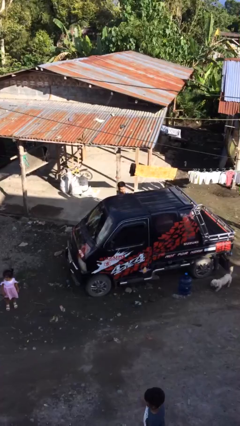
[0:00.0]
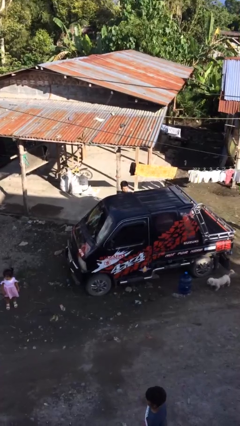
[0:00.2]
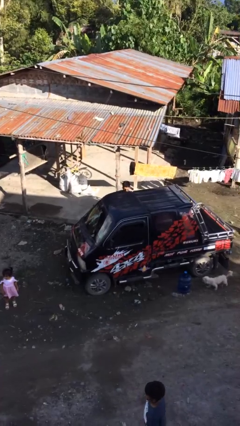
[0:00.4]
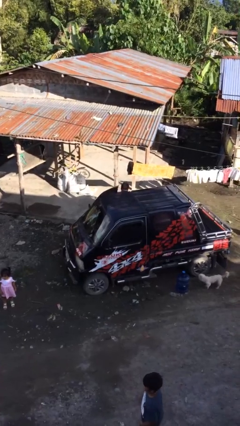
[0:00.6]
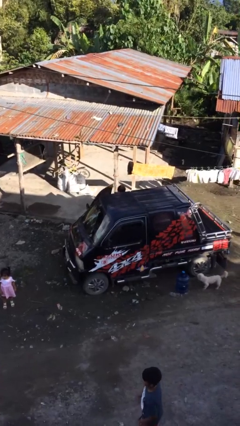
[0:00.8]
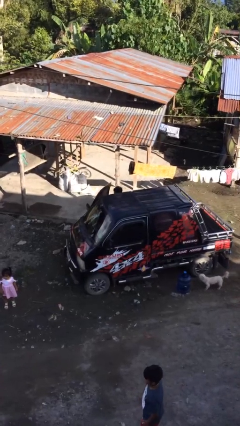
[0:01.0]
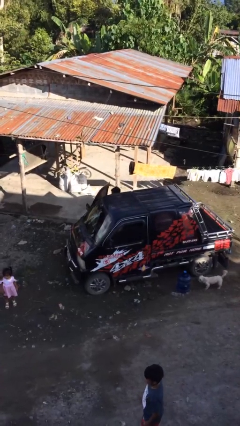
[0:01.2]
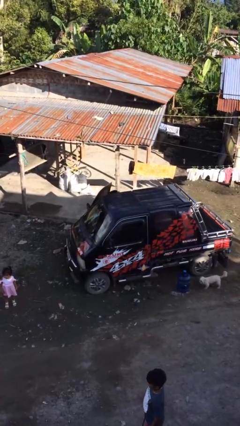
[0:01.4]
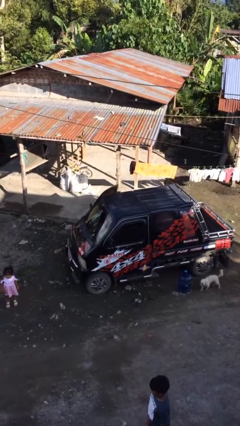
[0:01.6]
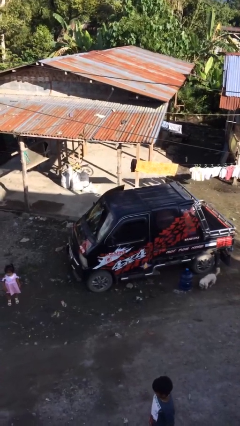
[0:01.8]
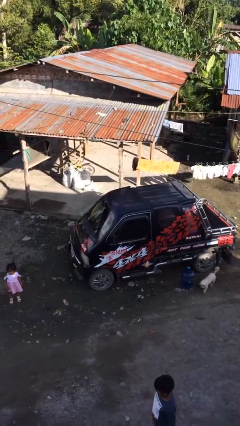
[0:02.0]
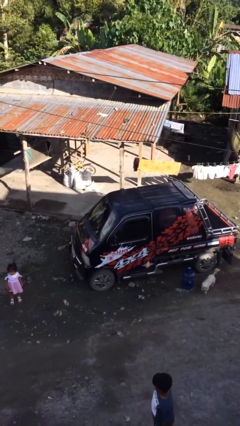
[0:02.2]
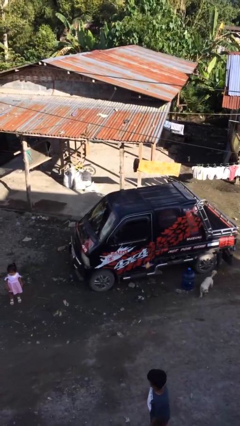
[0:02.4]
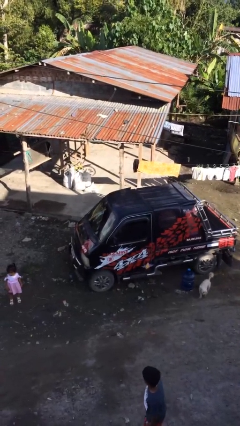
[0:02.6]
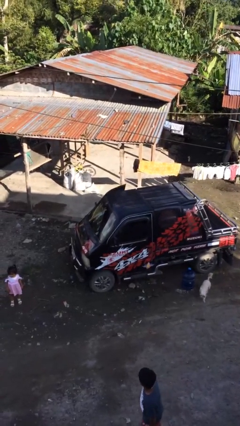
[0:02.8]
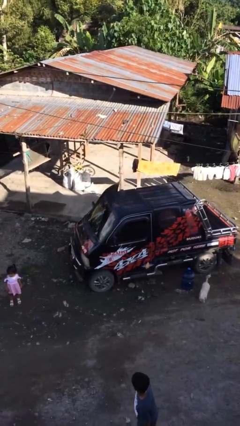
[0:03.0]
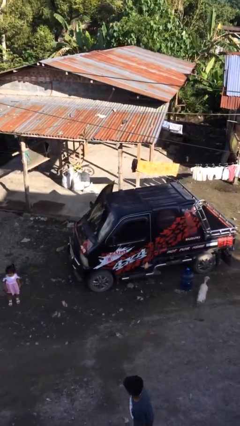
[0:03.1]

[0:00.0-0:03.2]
person enters car

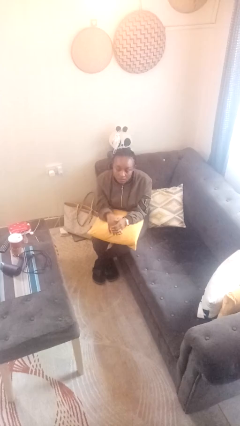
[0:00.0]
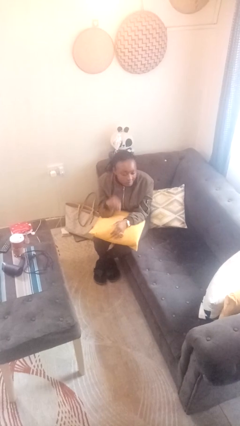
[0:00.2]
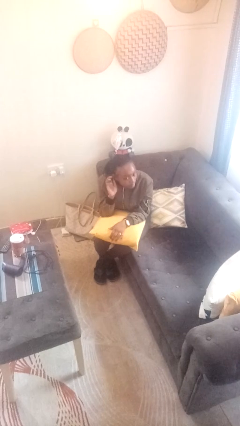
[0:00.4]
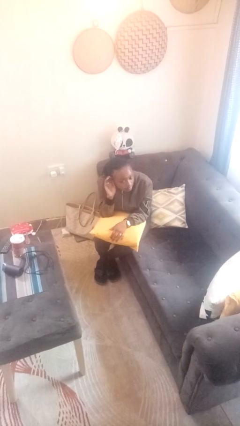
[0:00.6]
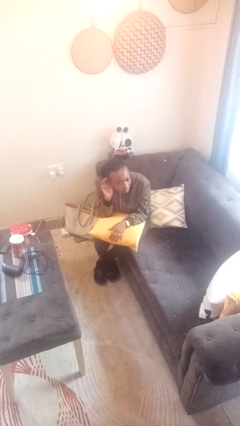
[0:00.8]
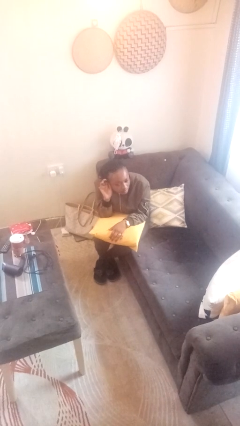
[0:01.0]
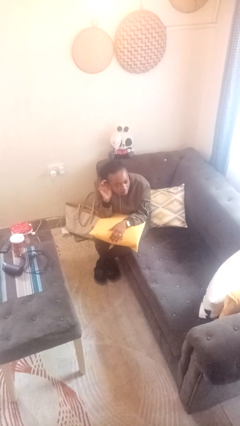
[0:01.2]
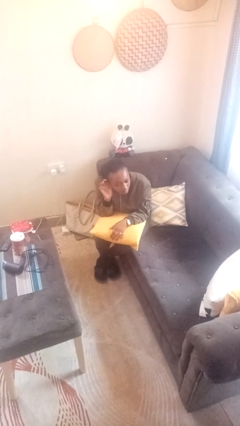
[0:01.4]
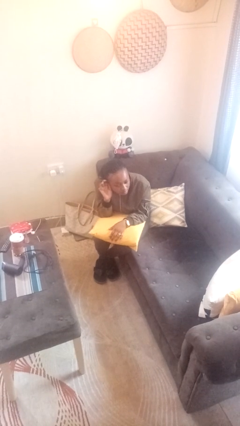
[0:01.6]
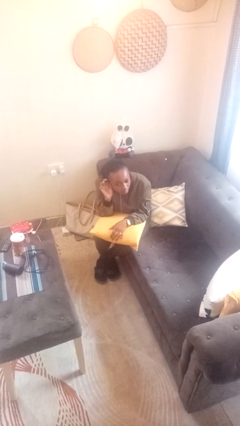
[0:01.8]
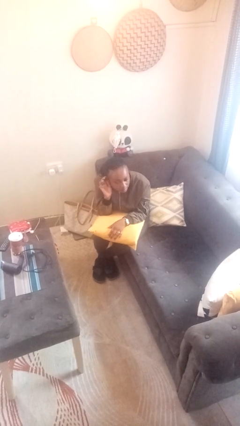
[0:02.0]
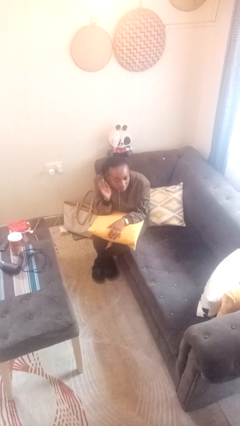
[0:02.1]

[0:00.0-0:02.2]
person gestures listen closely

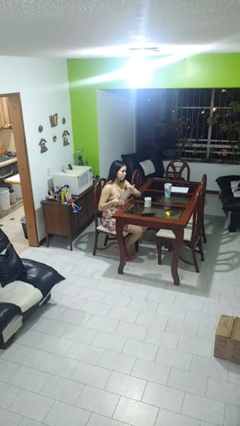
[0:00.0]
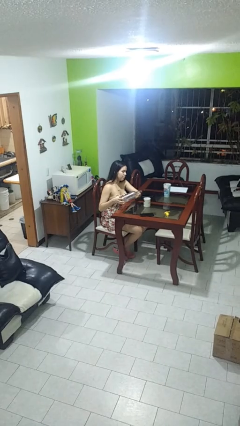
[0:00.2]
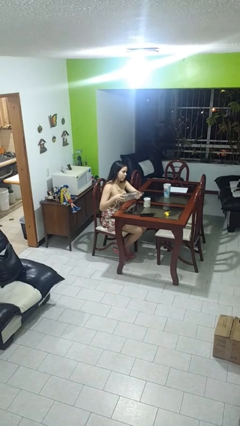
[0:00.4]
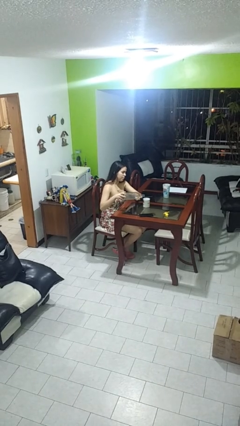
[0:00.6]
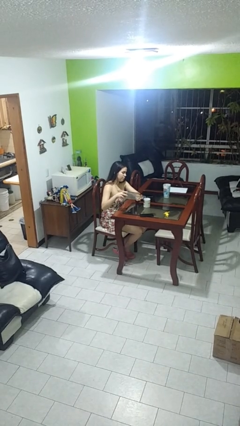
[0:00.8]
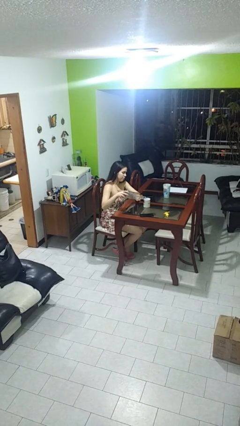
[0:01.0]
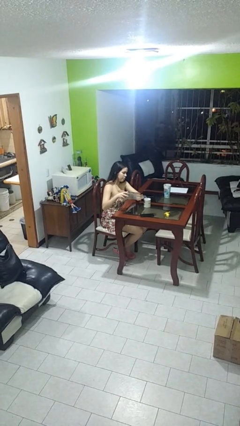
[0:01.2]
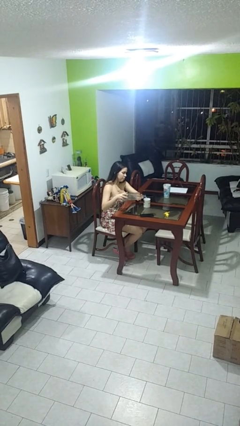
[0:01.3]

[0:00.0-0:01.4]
person pours liquid into cup

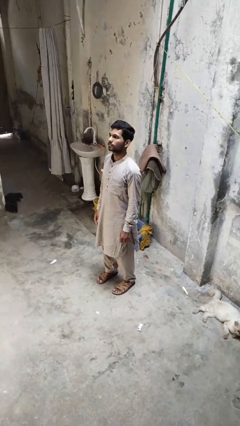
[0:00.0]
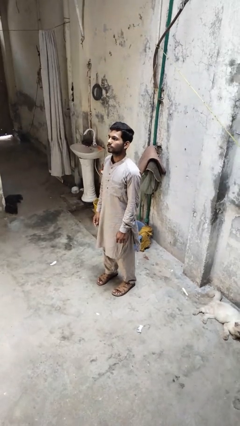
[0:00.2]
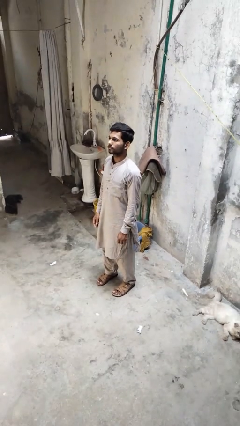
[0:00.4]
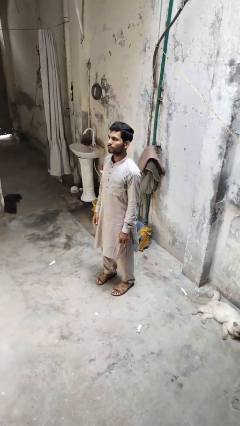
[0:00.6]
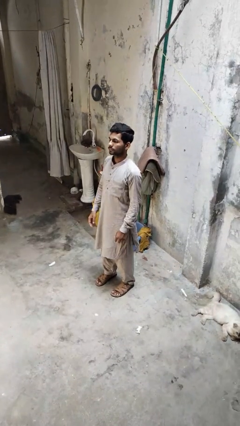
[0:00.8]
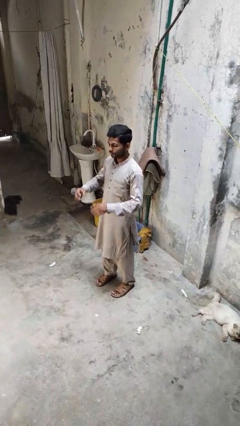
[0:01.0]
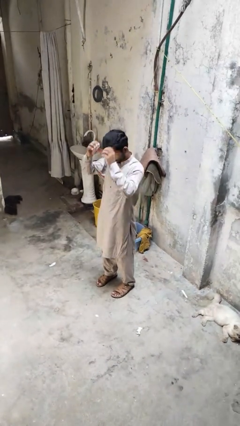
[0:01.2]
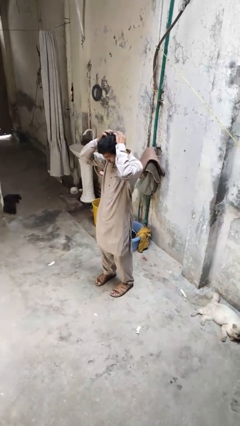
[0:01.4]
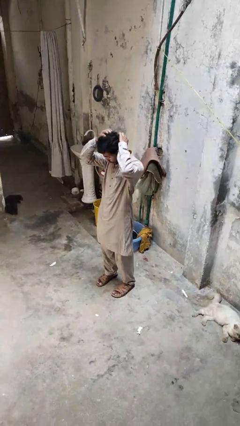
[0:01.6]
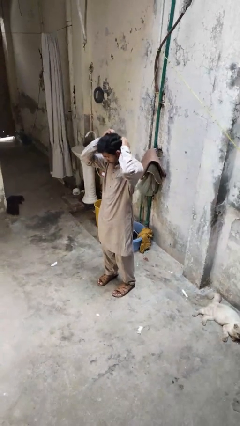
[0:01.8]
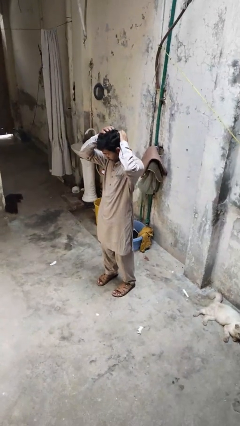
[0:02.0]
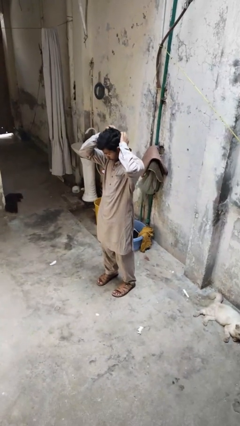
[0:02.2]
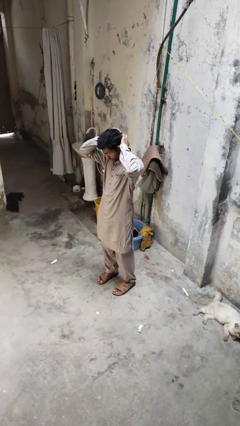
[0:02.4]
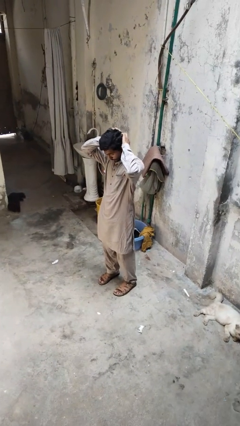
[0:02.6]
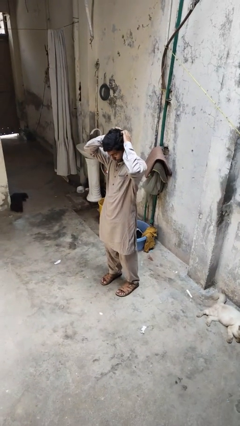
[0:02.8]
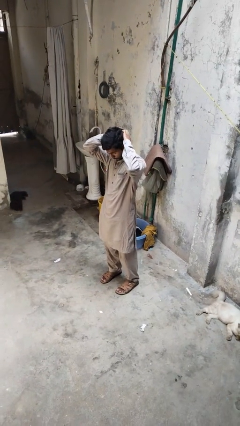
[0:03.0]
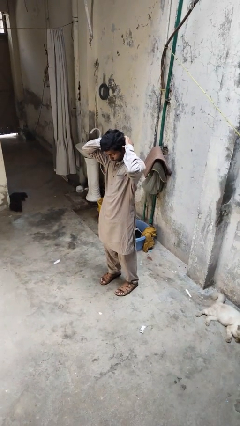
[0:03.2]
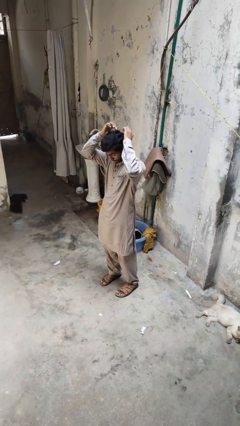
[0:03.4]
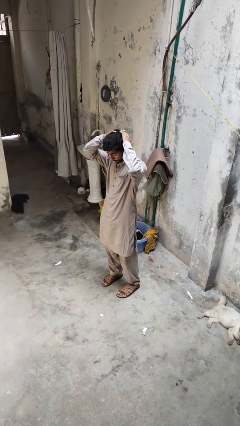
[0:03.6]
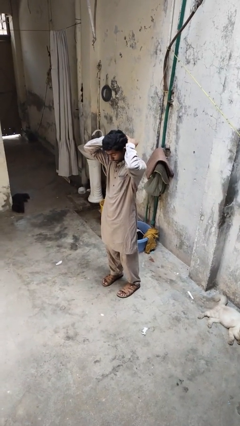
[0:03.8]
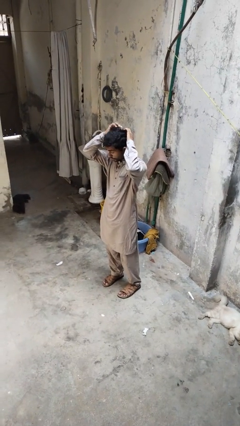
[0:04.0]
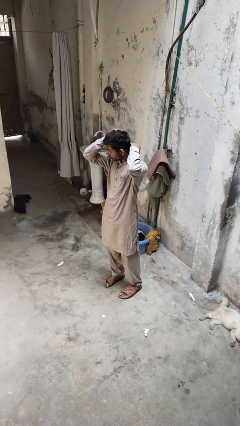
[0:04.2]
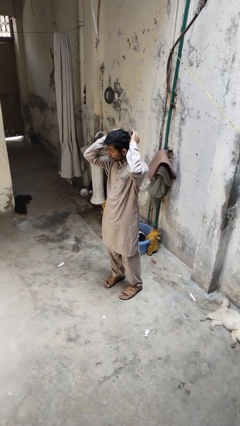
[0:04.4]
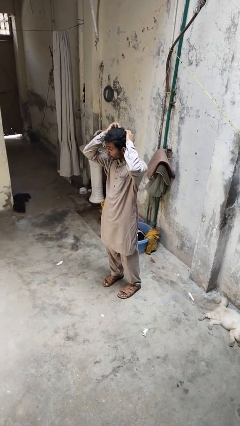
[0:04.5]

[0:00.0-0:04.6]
person scratches face

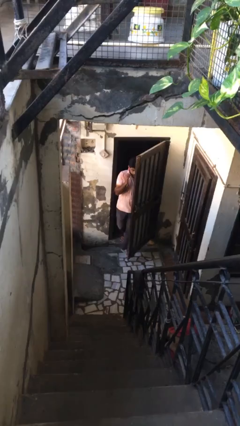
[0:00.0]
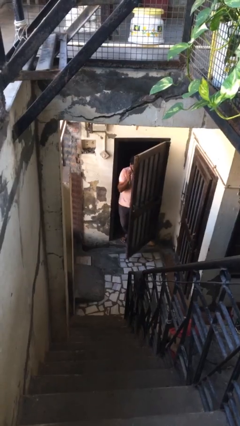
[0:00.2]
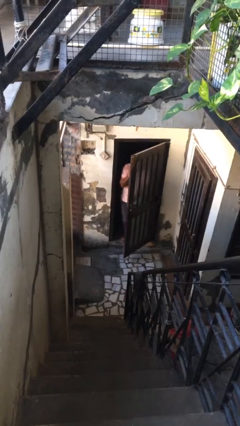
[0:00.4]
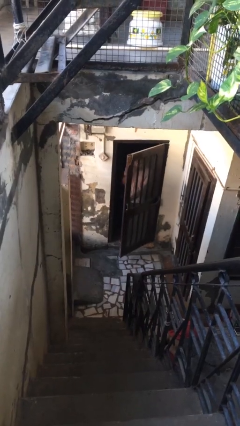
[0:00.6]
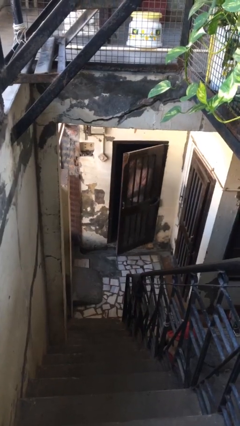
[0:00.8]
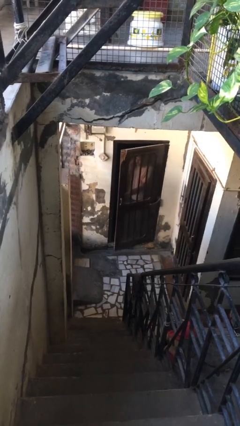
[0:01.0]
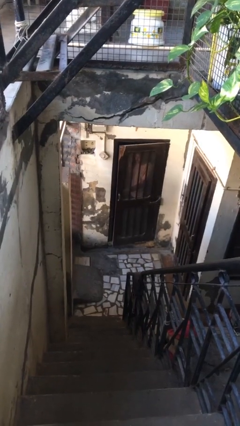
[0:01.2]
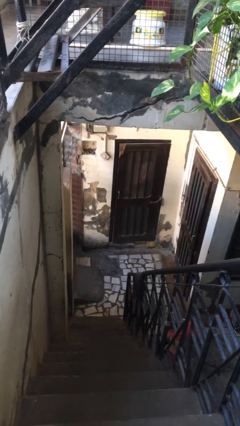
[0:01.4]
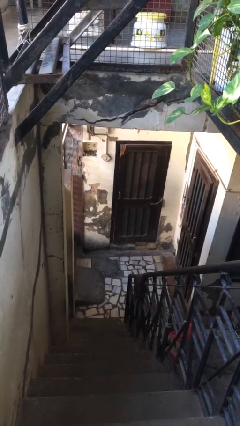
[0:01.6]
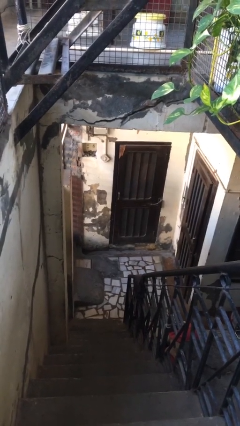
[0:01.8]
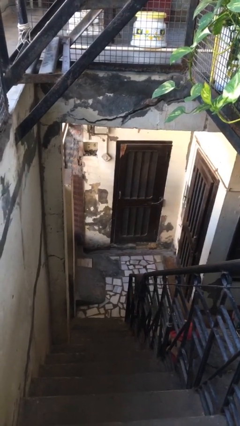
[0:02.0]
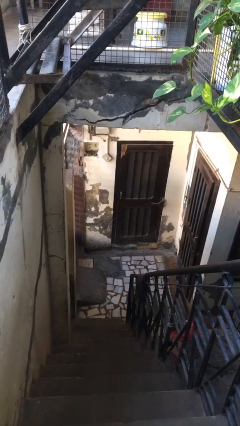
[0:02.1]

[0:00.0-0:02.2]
person closes facility door

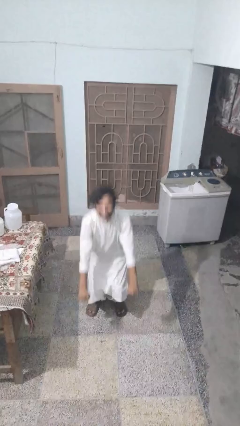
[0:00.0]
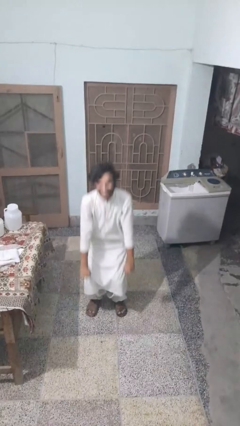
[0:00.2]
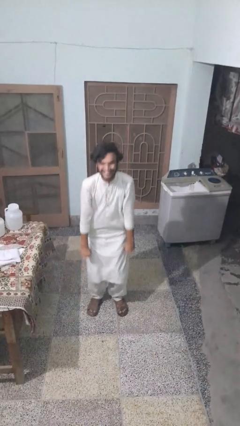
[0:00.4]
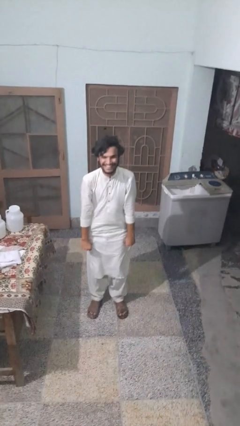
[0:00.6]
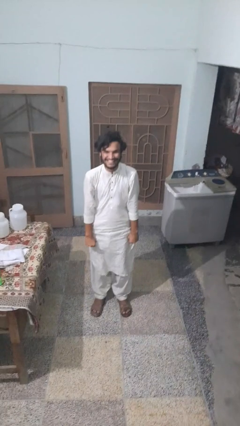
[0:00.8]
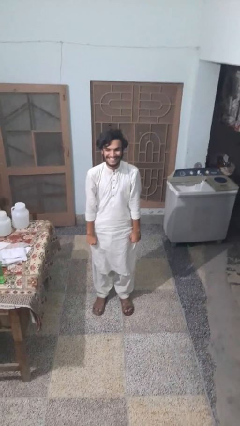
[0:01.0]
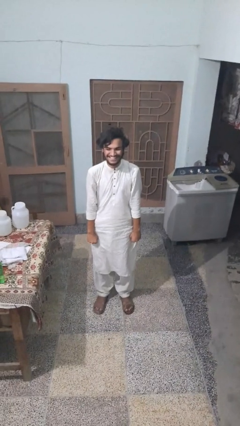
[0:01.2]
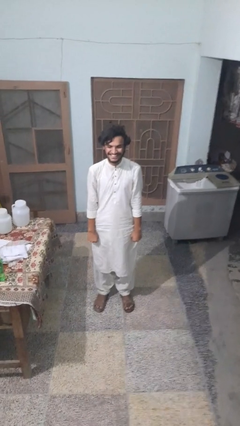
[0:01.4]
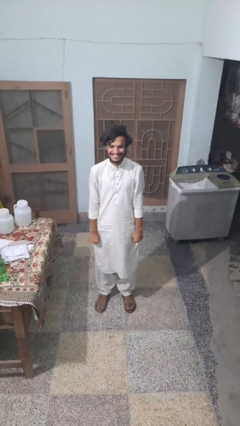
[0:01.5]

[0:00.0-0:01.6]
person stands up

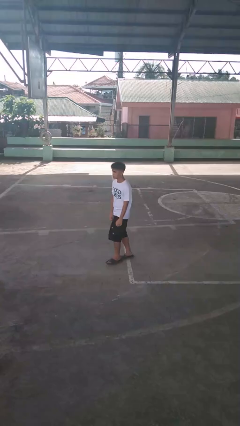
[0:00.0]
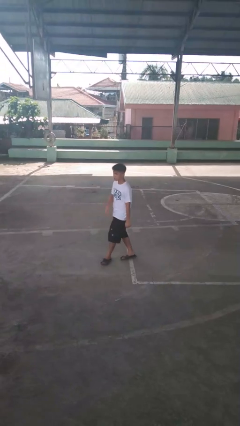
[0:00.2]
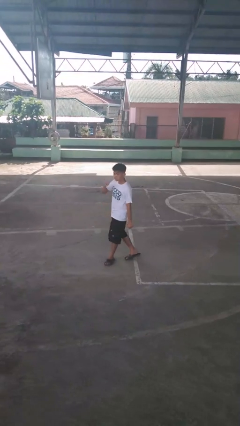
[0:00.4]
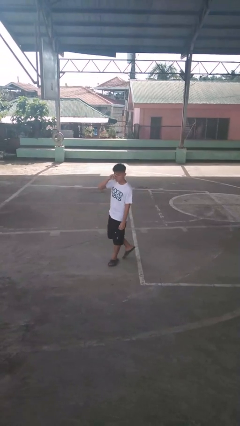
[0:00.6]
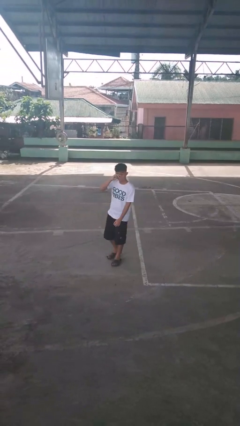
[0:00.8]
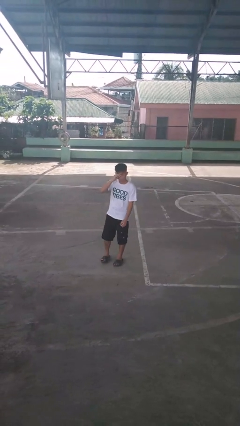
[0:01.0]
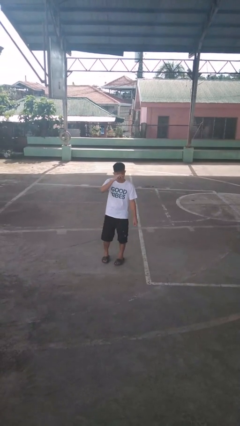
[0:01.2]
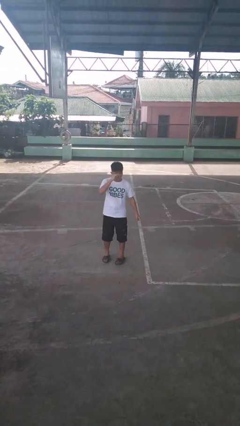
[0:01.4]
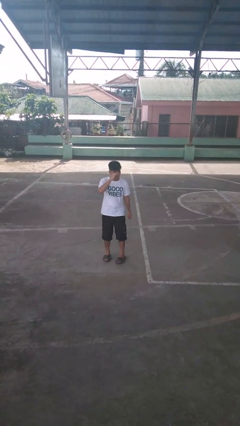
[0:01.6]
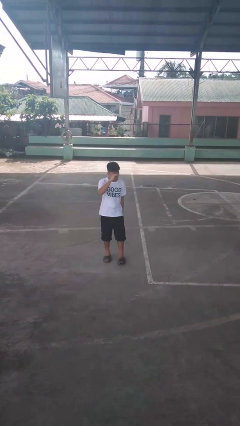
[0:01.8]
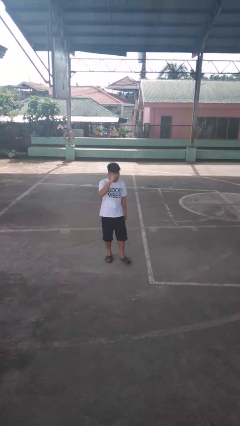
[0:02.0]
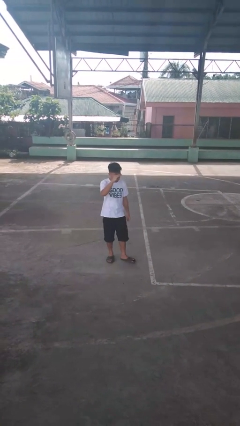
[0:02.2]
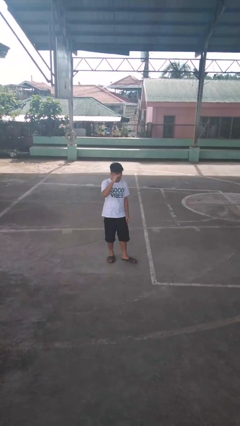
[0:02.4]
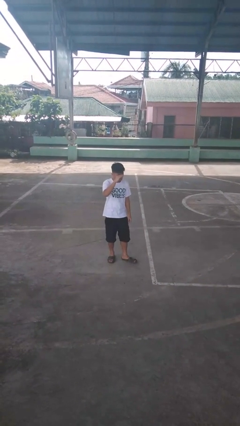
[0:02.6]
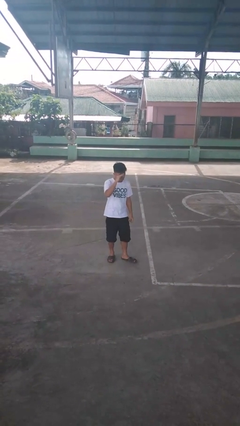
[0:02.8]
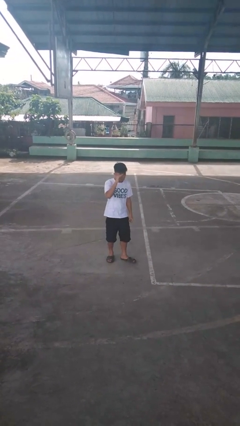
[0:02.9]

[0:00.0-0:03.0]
person rubs eyes
